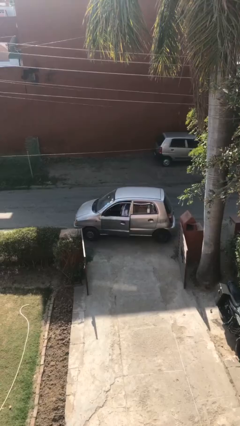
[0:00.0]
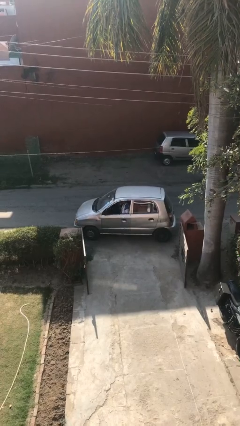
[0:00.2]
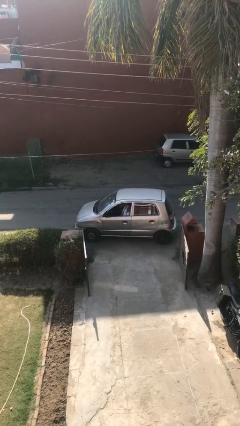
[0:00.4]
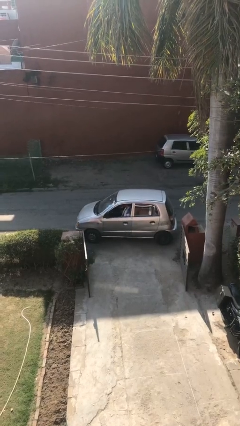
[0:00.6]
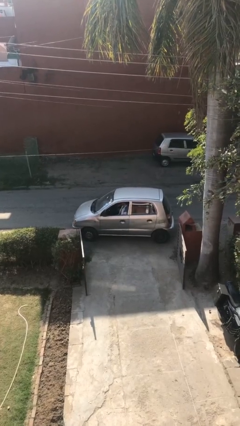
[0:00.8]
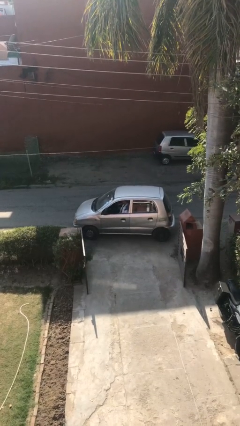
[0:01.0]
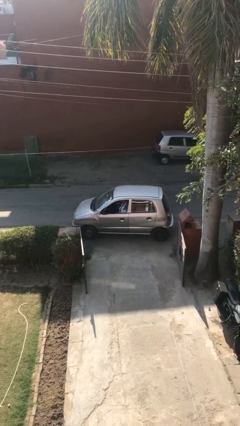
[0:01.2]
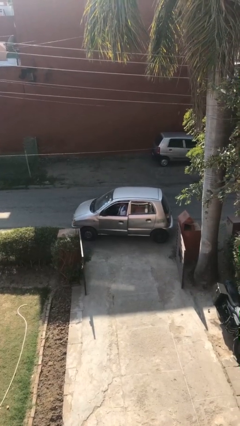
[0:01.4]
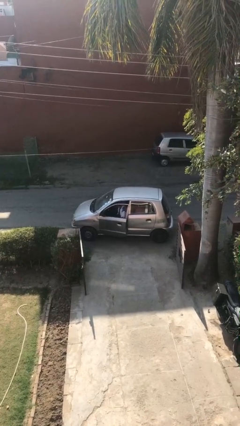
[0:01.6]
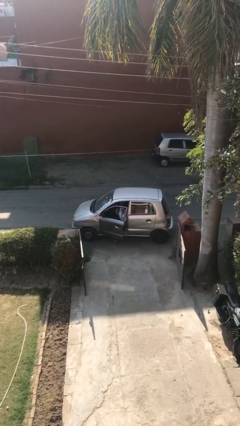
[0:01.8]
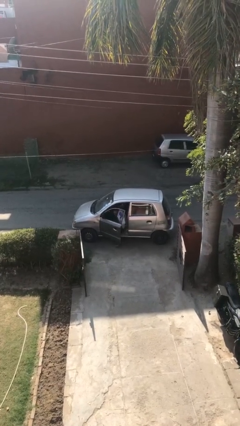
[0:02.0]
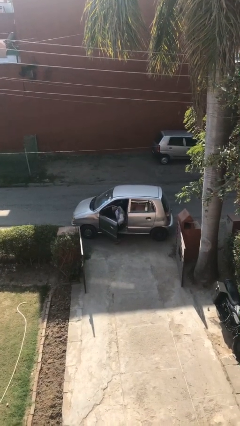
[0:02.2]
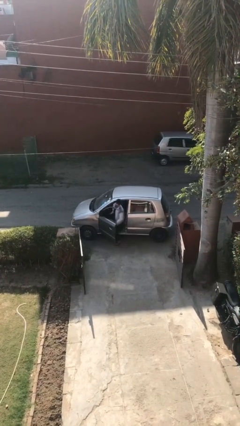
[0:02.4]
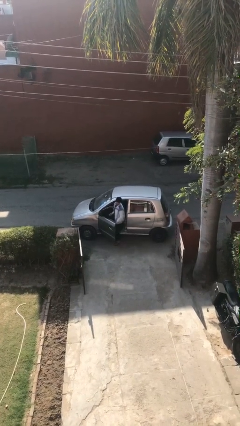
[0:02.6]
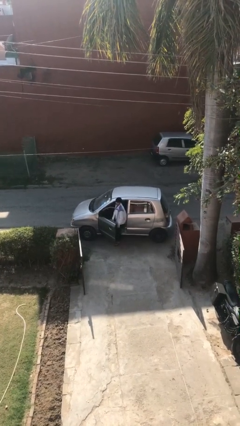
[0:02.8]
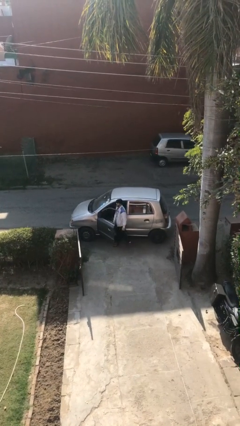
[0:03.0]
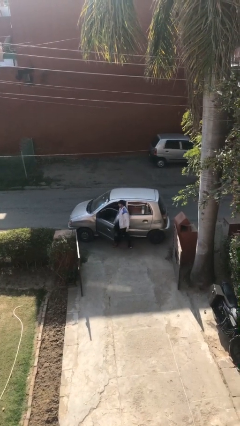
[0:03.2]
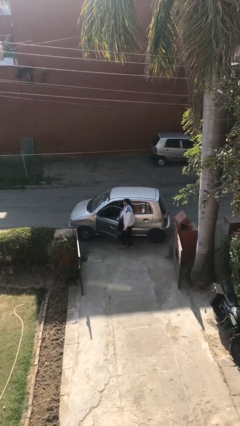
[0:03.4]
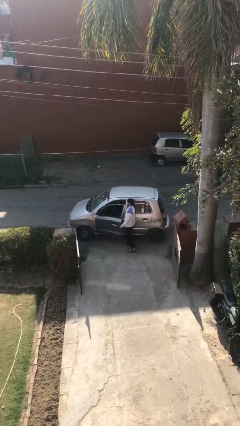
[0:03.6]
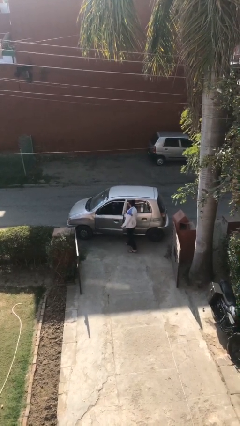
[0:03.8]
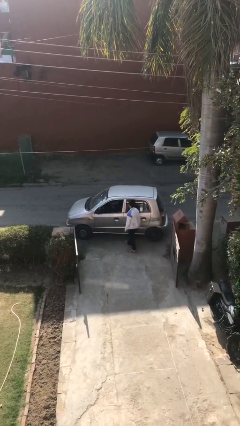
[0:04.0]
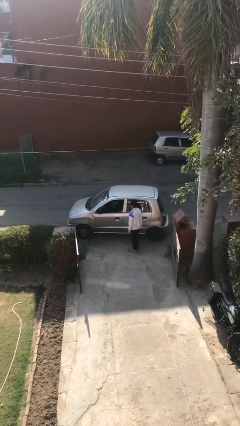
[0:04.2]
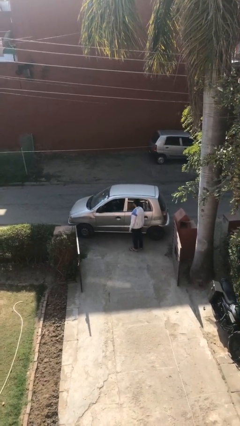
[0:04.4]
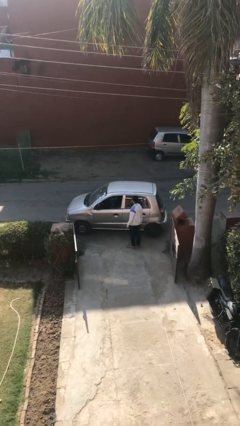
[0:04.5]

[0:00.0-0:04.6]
car drops off person

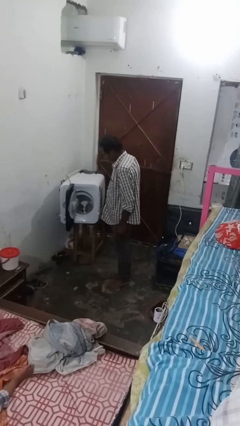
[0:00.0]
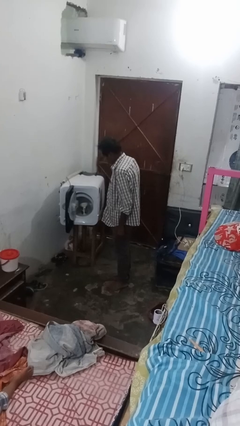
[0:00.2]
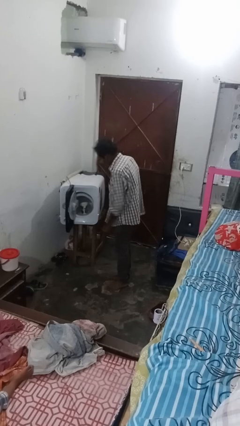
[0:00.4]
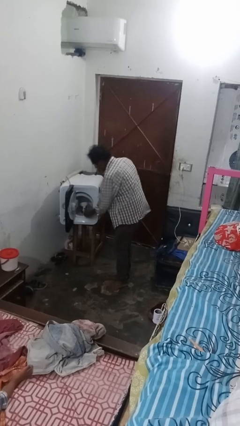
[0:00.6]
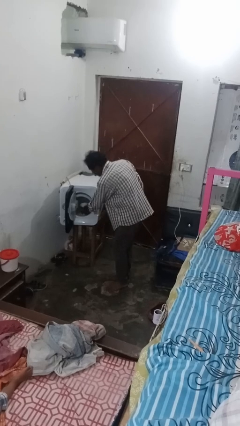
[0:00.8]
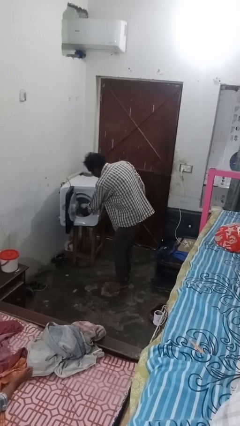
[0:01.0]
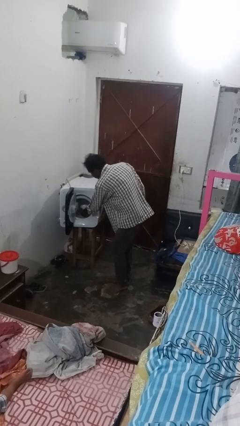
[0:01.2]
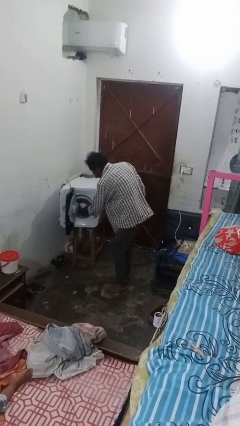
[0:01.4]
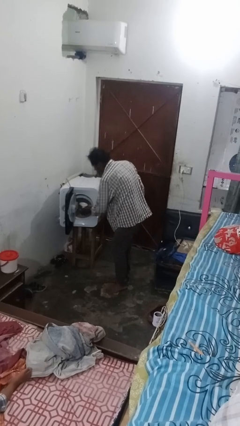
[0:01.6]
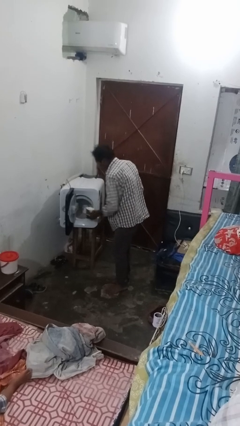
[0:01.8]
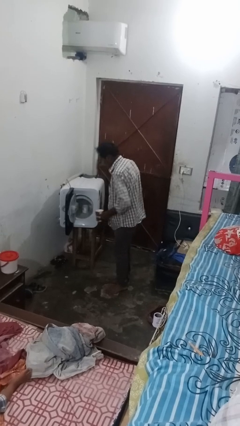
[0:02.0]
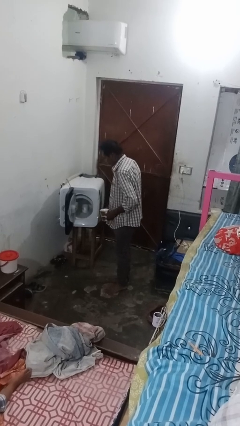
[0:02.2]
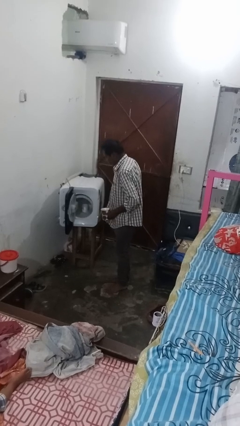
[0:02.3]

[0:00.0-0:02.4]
person unloads dishwasher

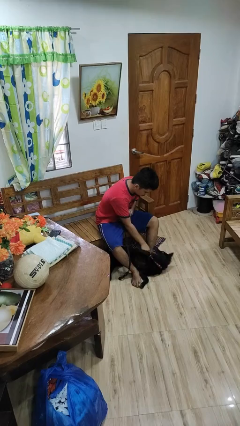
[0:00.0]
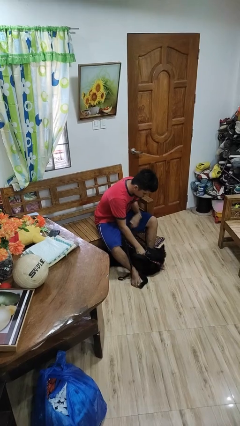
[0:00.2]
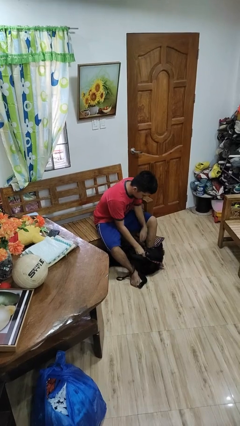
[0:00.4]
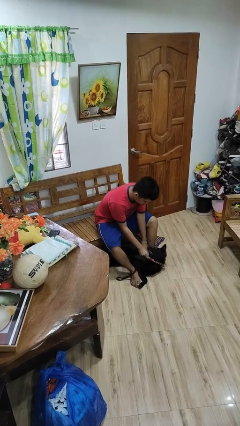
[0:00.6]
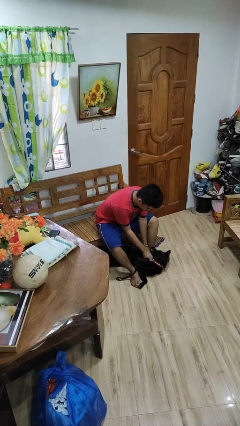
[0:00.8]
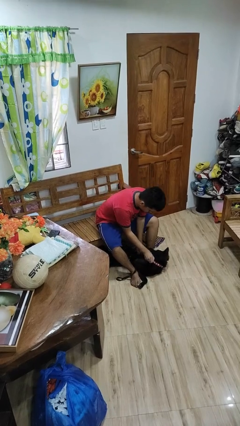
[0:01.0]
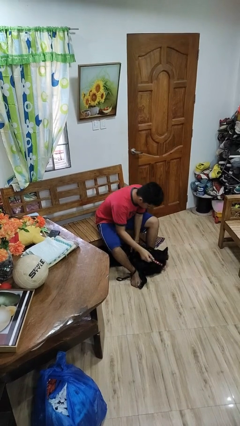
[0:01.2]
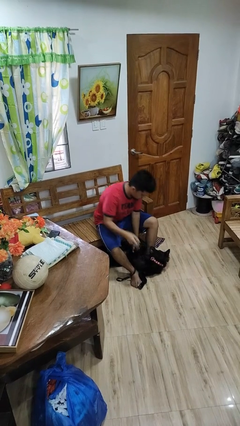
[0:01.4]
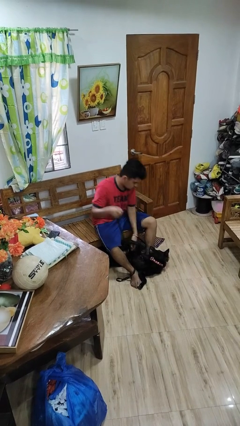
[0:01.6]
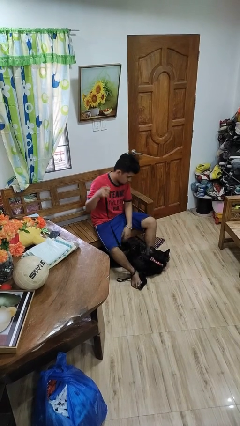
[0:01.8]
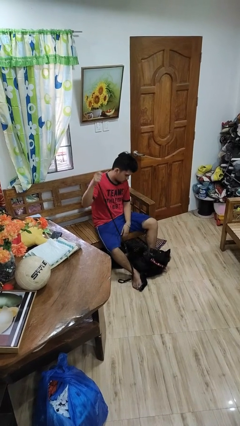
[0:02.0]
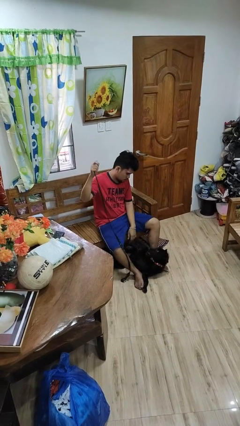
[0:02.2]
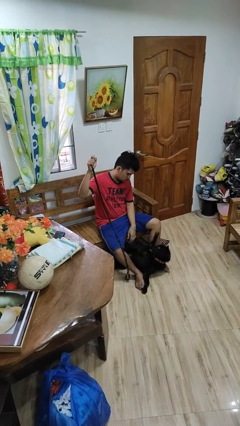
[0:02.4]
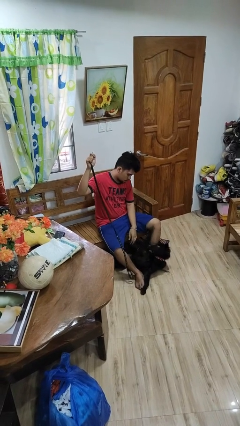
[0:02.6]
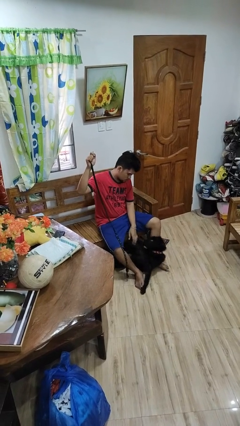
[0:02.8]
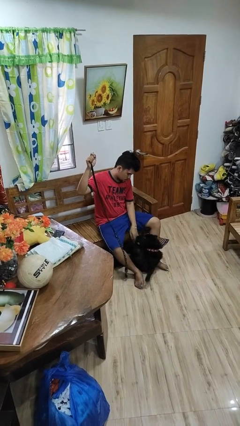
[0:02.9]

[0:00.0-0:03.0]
person unattaches leash from dog

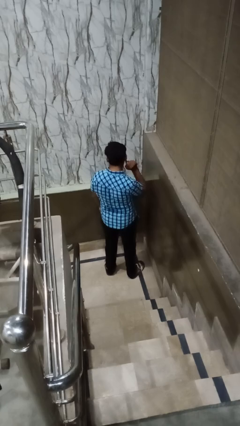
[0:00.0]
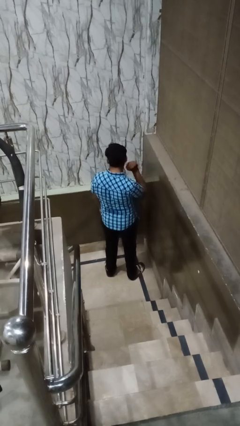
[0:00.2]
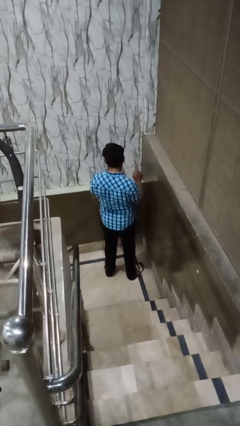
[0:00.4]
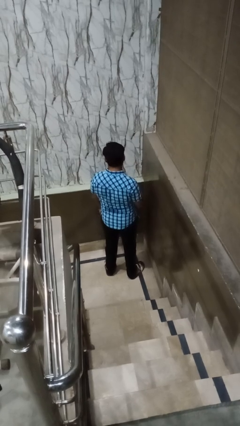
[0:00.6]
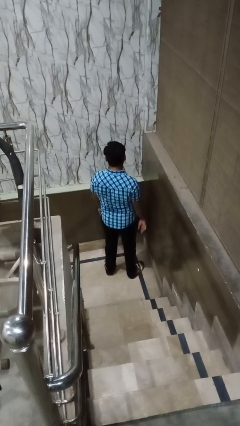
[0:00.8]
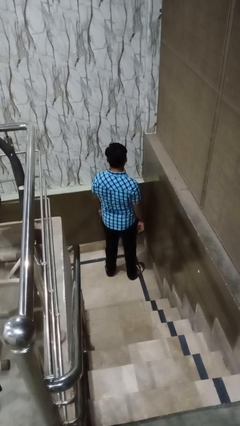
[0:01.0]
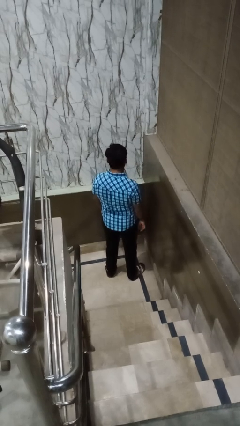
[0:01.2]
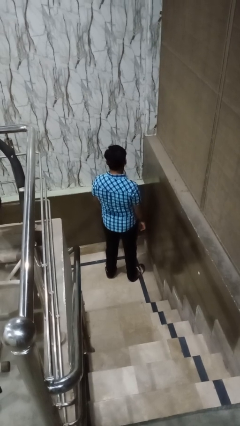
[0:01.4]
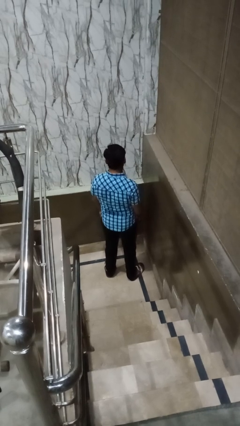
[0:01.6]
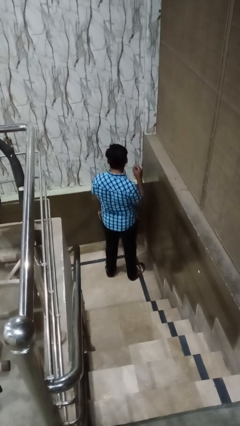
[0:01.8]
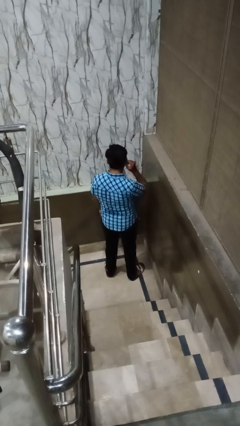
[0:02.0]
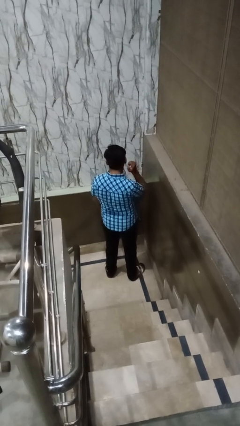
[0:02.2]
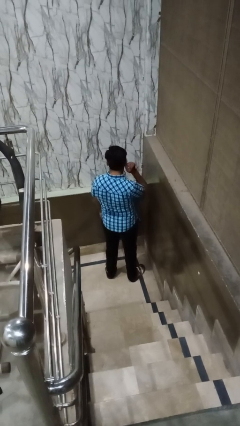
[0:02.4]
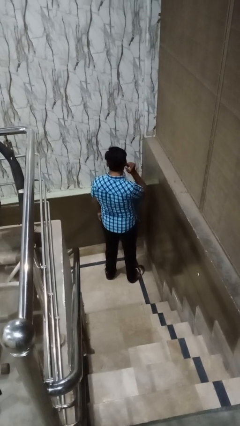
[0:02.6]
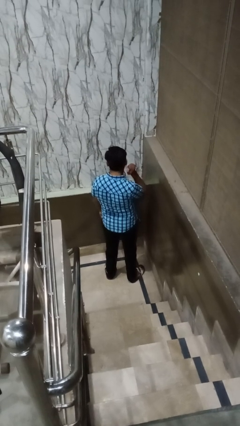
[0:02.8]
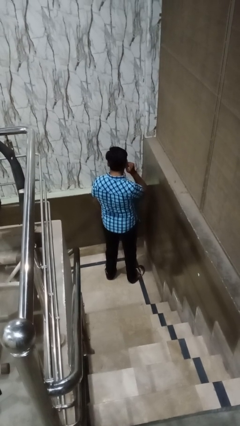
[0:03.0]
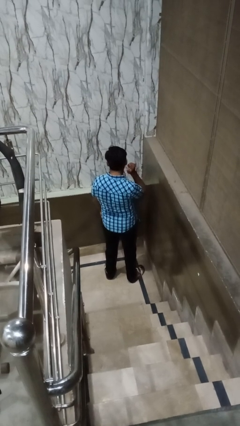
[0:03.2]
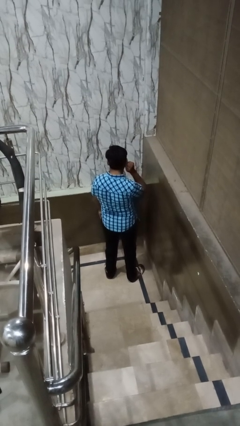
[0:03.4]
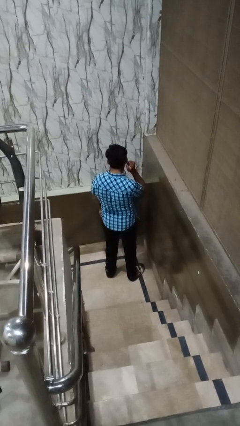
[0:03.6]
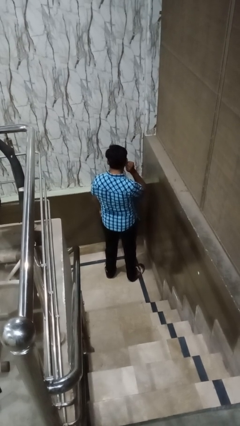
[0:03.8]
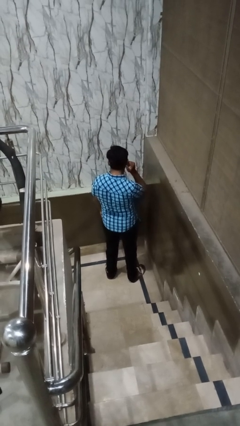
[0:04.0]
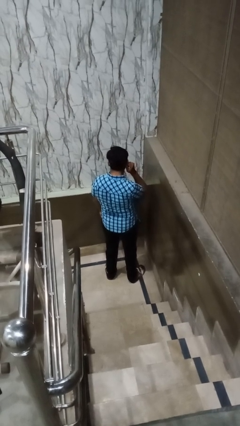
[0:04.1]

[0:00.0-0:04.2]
person touches earlobe

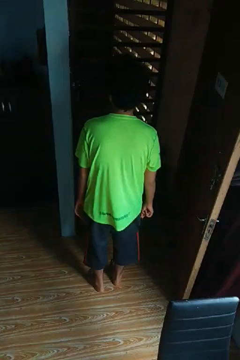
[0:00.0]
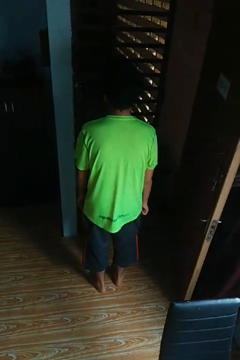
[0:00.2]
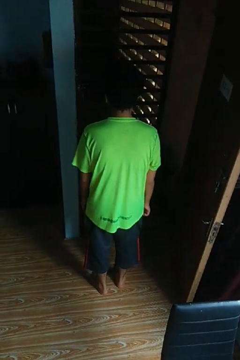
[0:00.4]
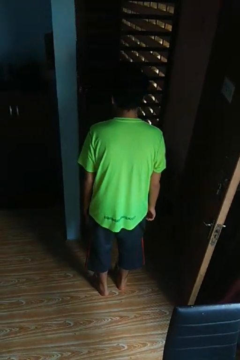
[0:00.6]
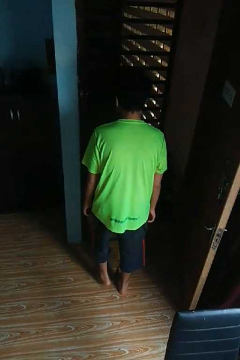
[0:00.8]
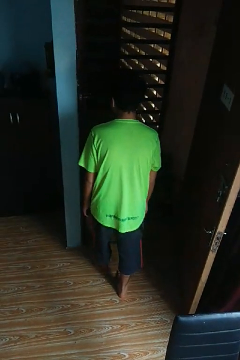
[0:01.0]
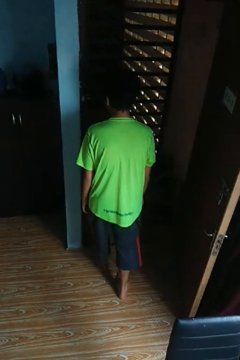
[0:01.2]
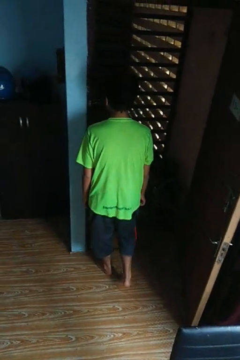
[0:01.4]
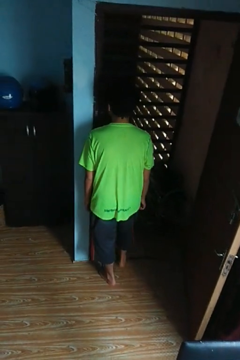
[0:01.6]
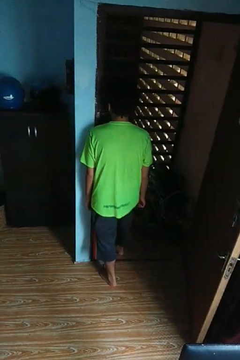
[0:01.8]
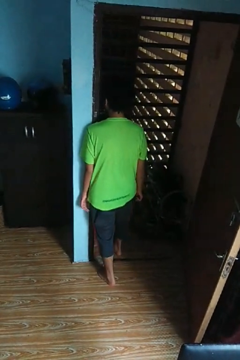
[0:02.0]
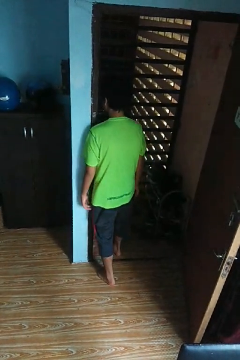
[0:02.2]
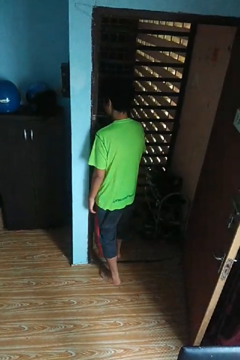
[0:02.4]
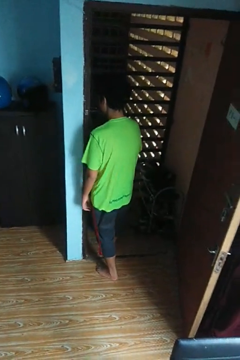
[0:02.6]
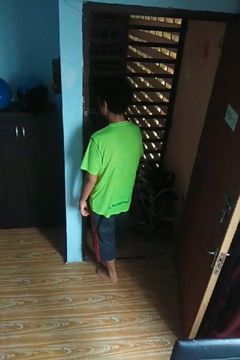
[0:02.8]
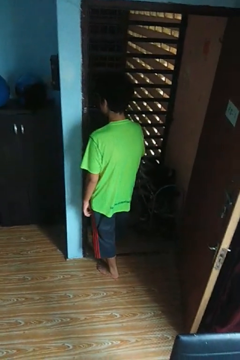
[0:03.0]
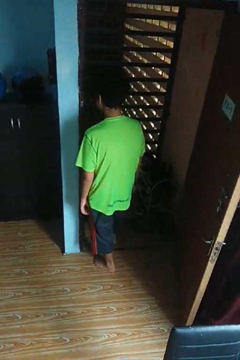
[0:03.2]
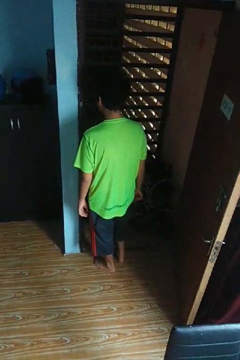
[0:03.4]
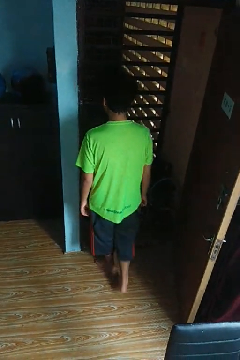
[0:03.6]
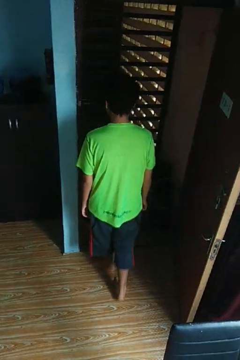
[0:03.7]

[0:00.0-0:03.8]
person bumps into wall

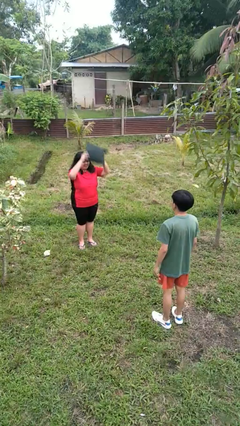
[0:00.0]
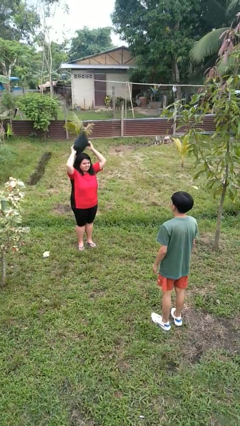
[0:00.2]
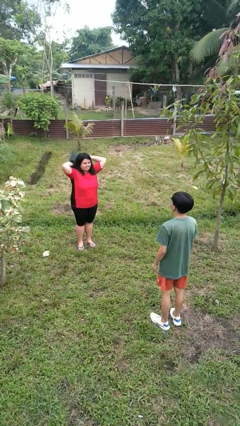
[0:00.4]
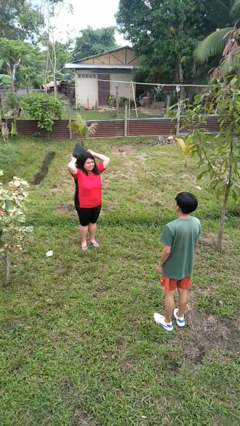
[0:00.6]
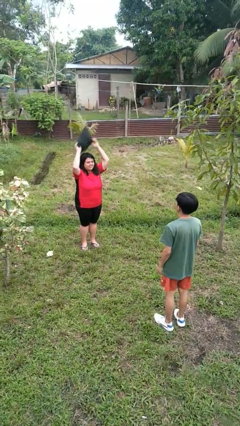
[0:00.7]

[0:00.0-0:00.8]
person throws object to person
